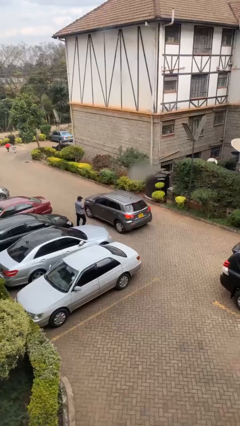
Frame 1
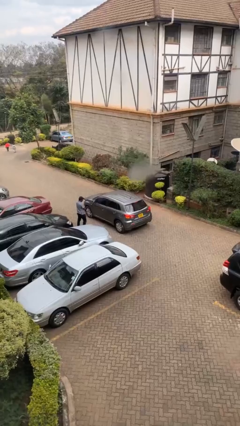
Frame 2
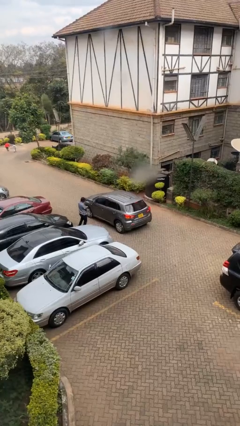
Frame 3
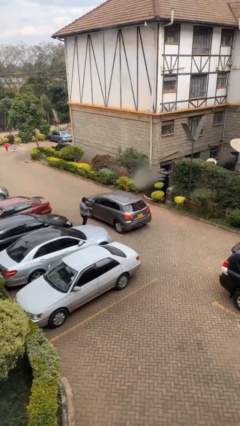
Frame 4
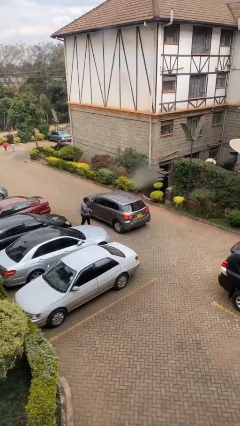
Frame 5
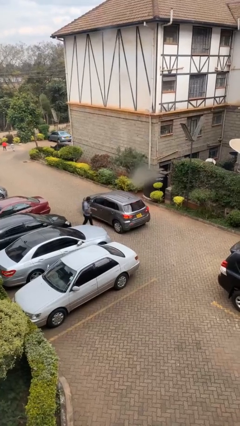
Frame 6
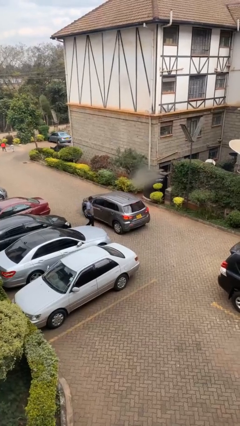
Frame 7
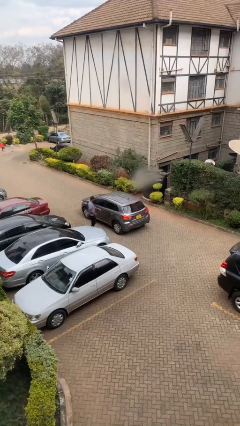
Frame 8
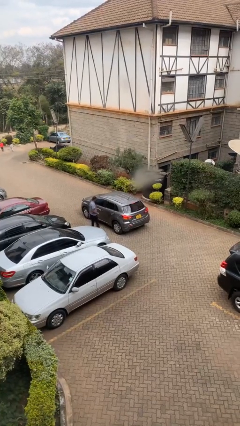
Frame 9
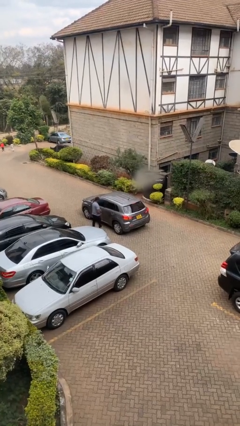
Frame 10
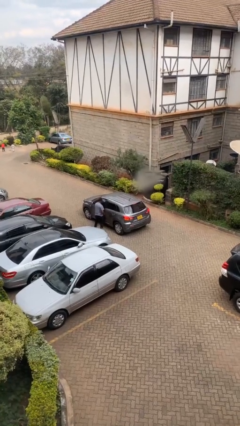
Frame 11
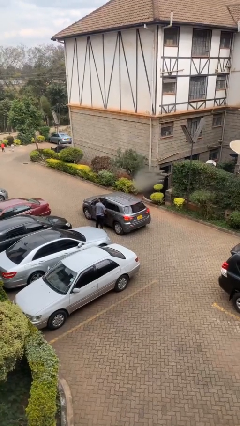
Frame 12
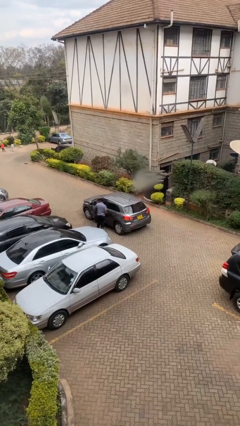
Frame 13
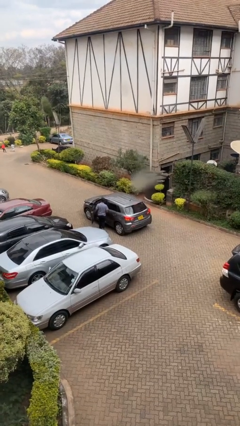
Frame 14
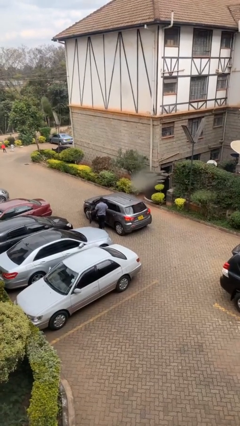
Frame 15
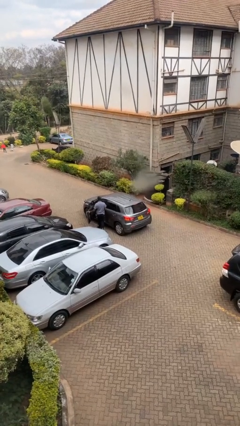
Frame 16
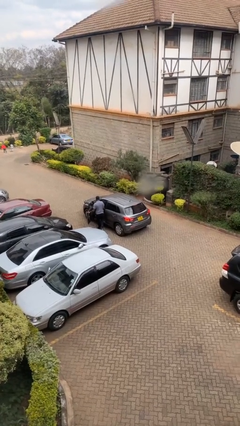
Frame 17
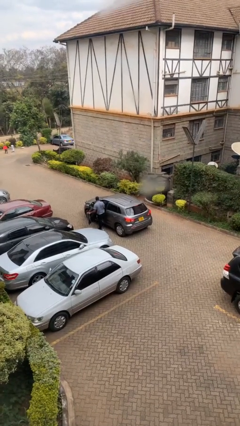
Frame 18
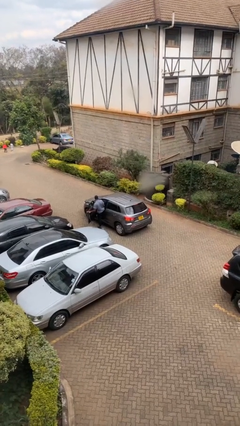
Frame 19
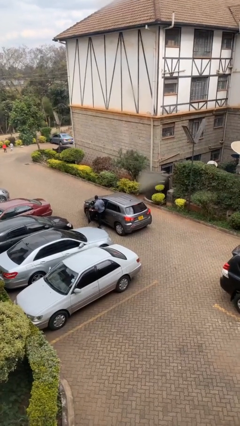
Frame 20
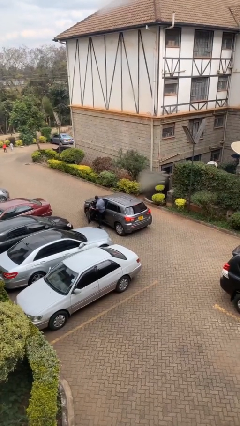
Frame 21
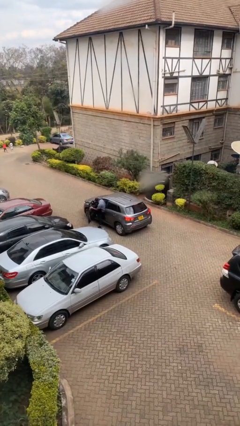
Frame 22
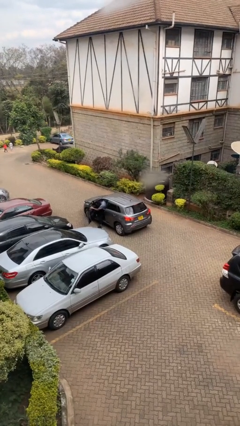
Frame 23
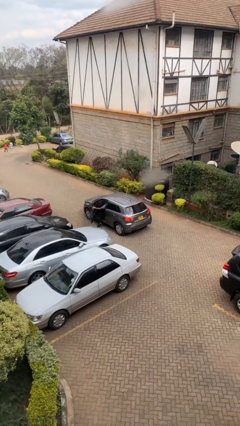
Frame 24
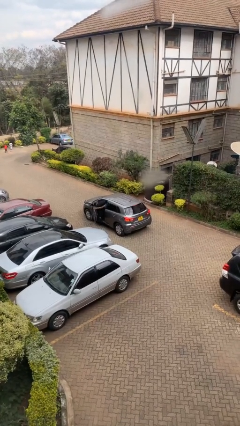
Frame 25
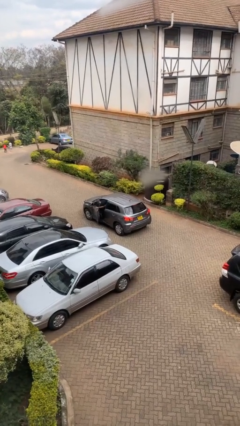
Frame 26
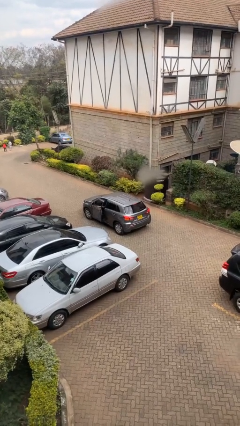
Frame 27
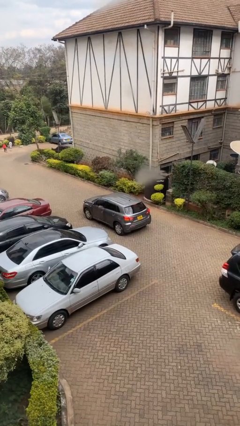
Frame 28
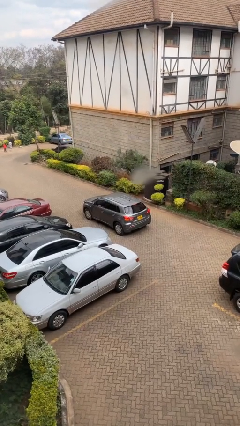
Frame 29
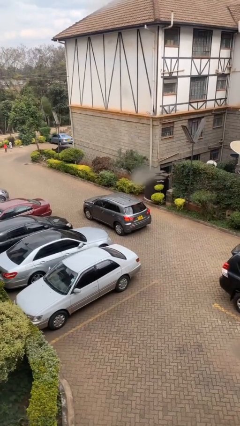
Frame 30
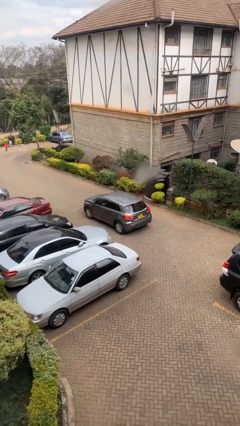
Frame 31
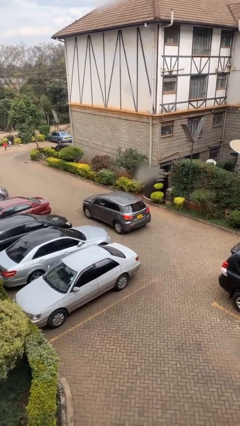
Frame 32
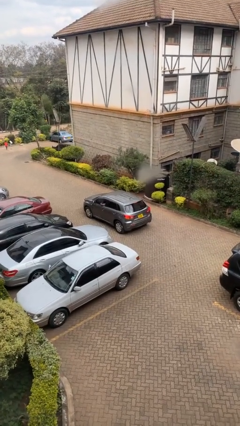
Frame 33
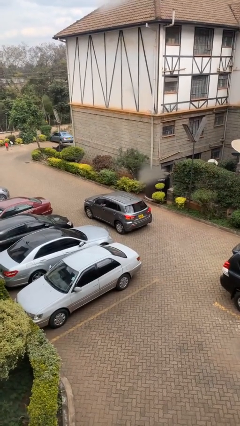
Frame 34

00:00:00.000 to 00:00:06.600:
car picks up person

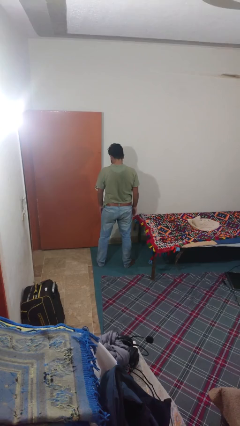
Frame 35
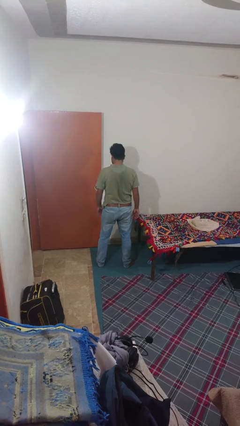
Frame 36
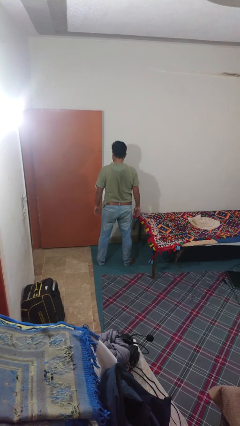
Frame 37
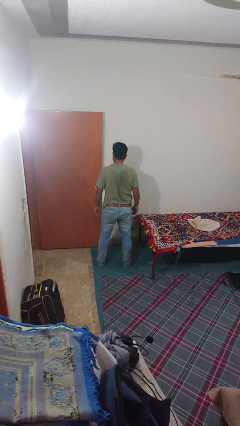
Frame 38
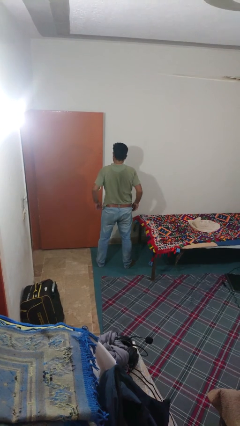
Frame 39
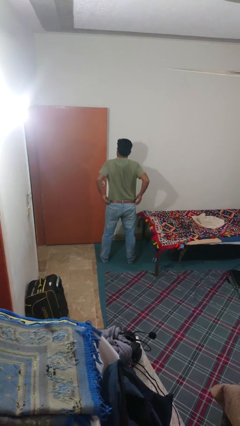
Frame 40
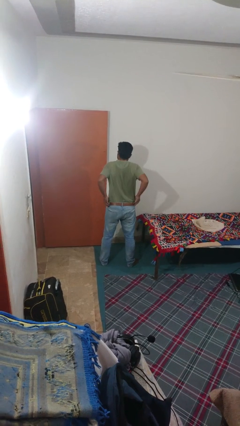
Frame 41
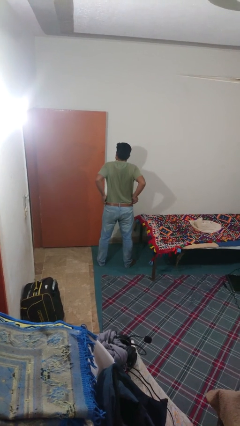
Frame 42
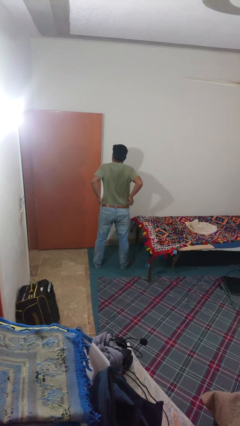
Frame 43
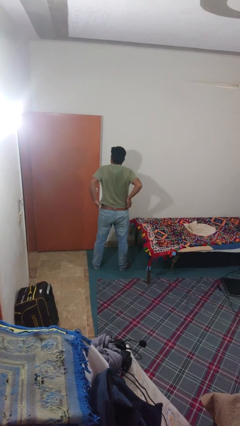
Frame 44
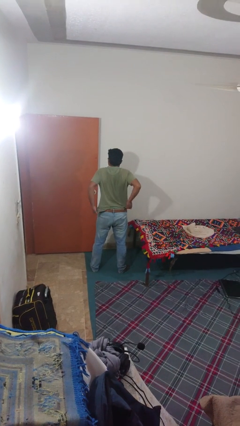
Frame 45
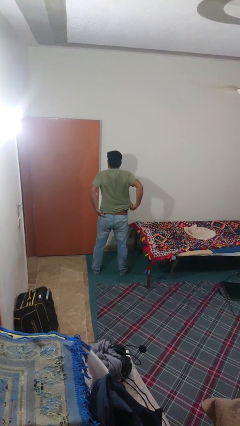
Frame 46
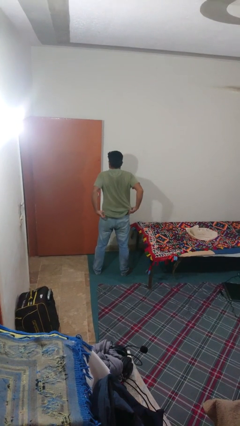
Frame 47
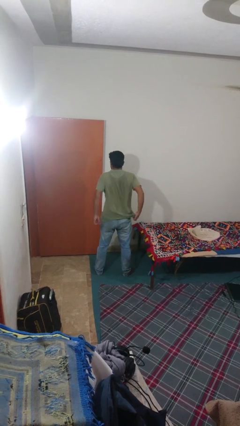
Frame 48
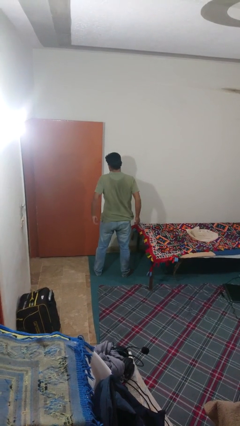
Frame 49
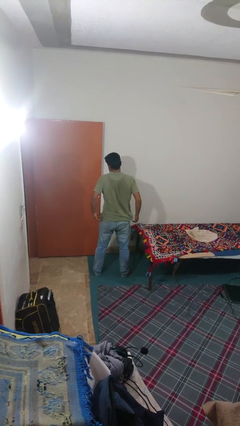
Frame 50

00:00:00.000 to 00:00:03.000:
person untucks shirt

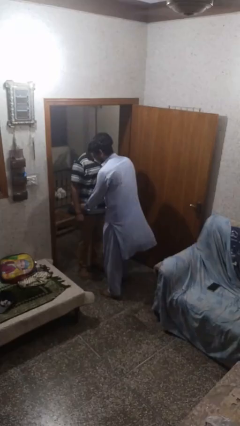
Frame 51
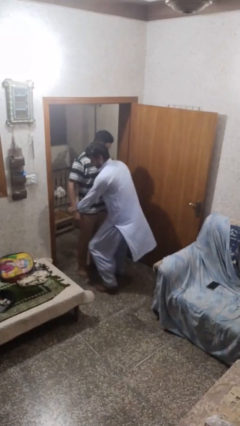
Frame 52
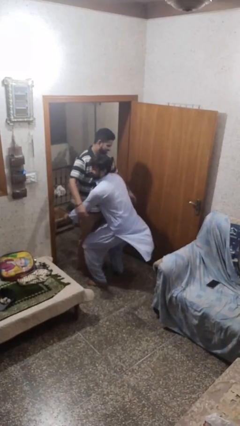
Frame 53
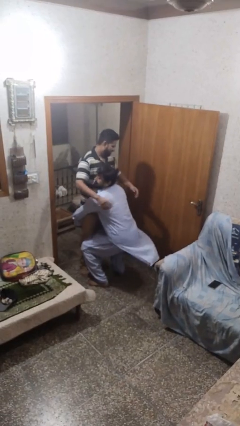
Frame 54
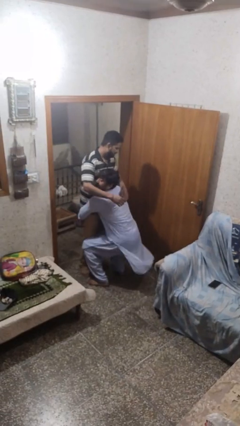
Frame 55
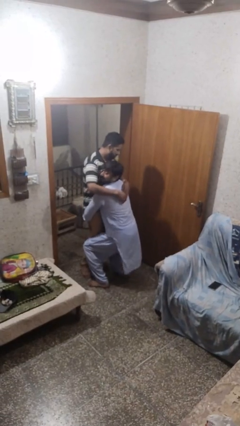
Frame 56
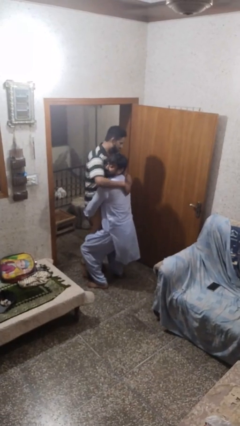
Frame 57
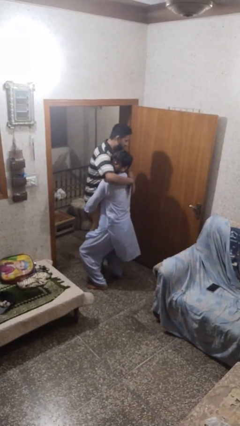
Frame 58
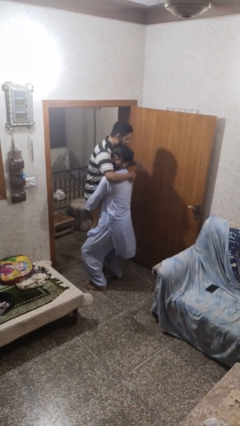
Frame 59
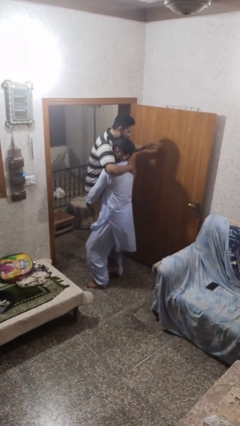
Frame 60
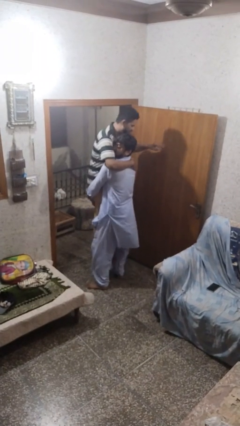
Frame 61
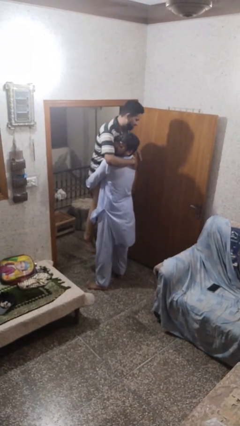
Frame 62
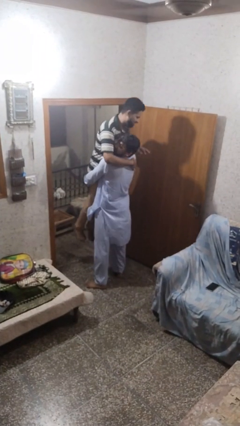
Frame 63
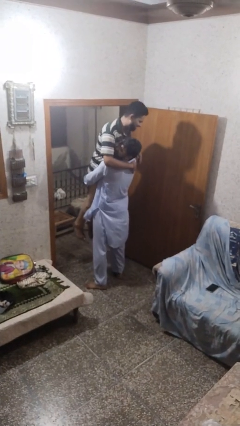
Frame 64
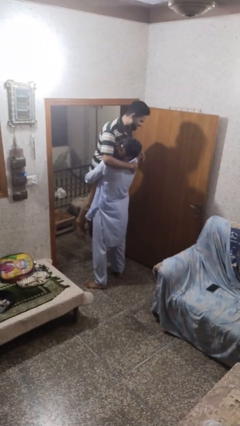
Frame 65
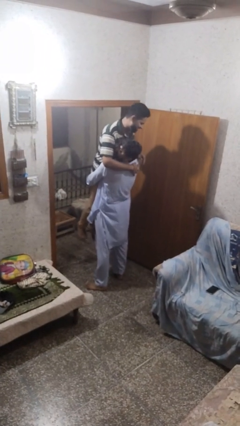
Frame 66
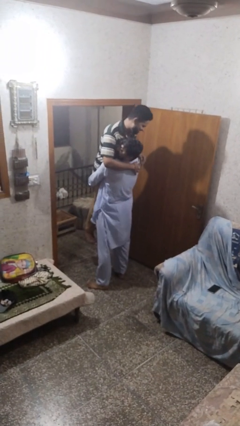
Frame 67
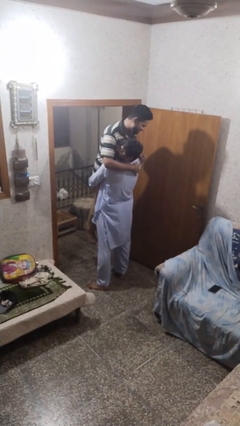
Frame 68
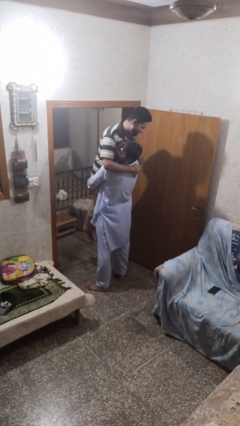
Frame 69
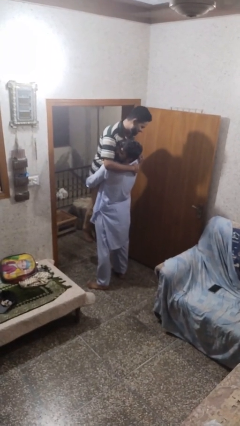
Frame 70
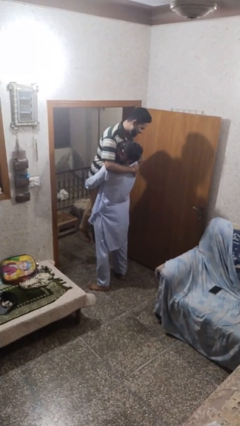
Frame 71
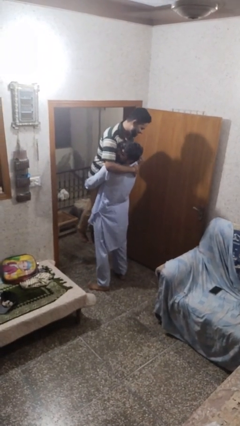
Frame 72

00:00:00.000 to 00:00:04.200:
person picks up person

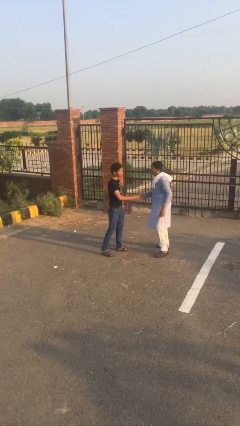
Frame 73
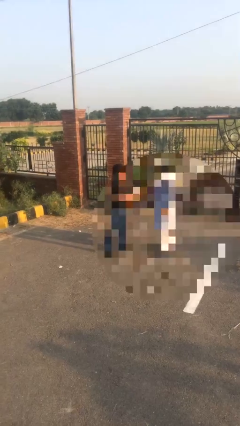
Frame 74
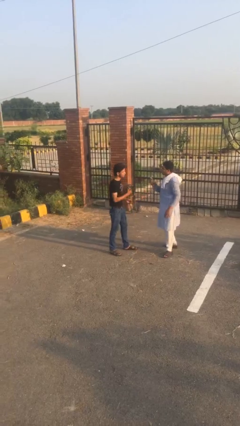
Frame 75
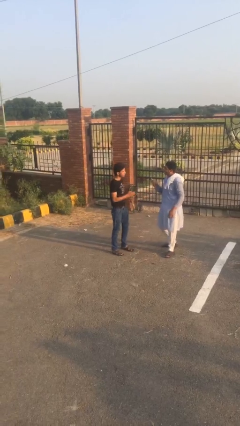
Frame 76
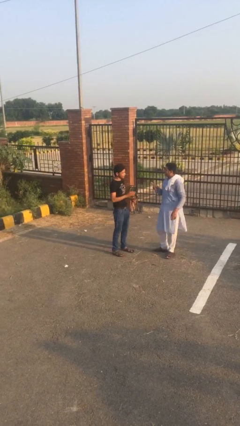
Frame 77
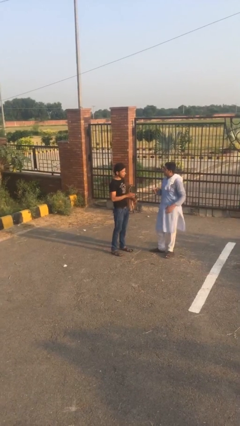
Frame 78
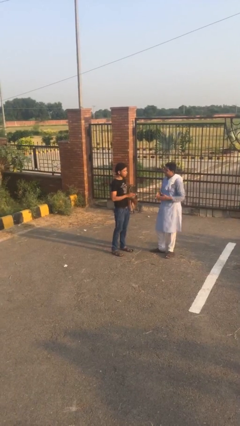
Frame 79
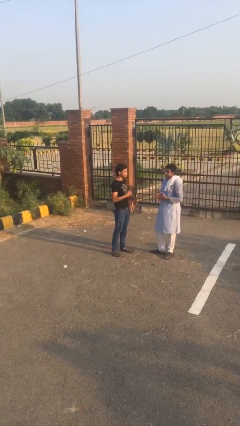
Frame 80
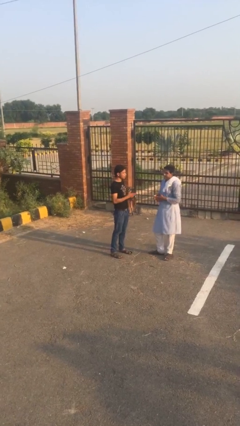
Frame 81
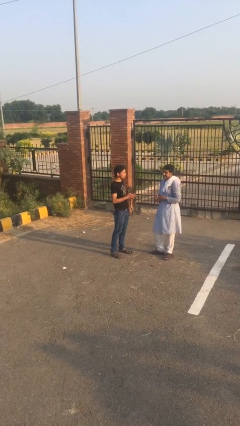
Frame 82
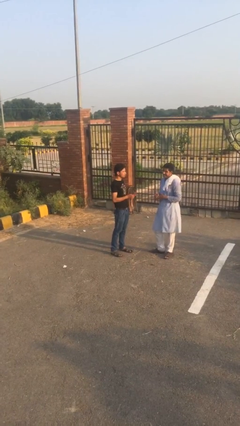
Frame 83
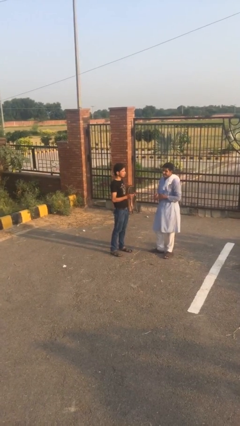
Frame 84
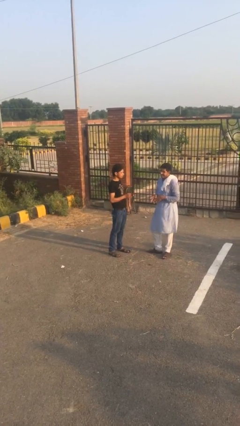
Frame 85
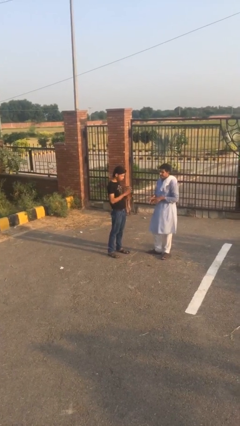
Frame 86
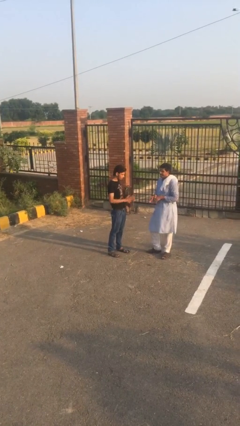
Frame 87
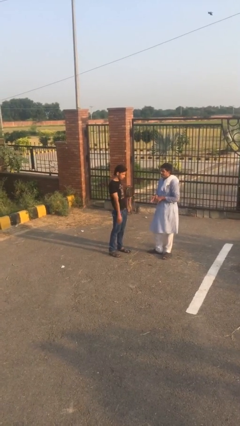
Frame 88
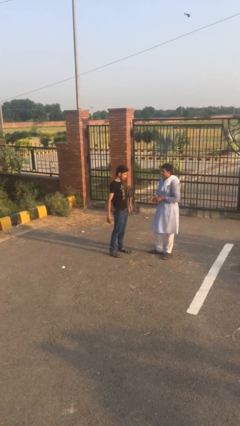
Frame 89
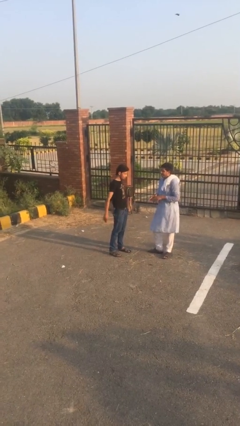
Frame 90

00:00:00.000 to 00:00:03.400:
person talks to person

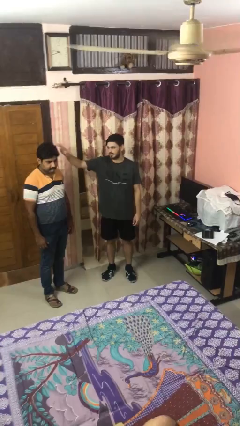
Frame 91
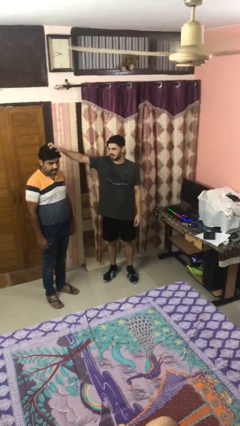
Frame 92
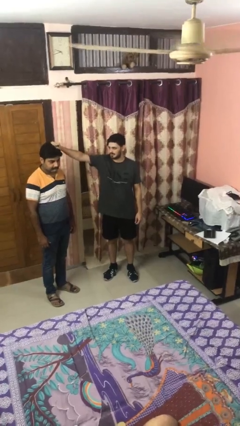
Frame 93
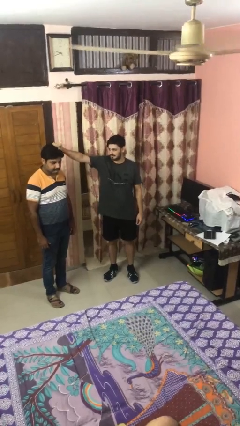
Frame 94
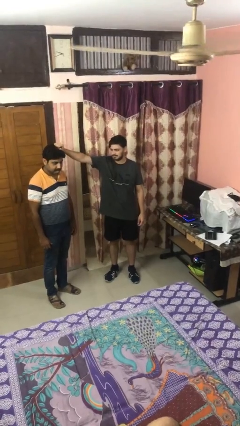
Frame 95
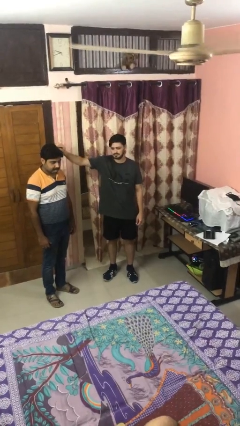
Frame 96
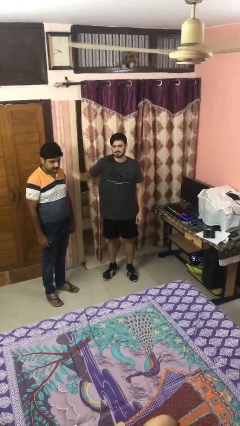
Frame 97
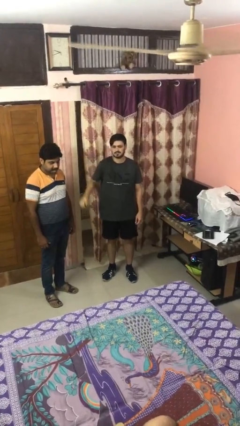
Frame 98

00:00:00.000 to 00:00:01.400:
person grabs person by hair
